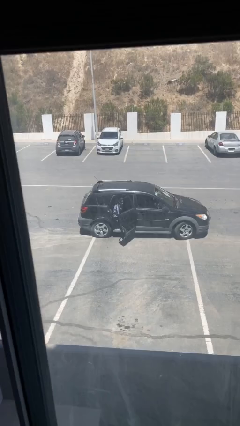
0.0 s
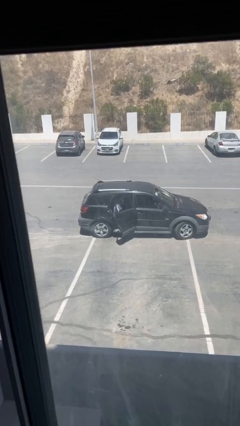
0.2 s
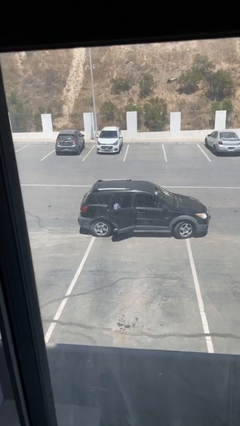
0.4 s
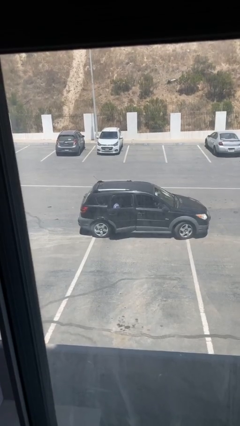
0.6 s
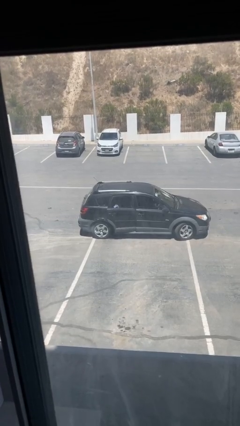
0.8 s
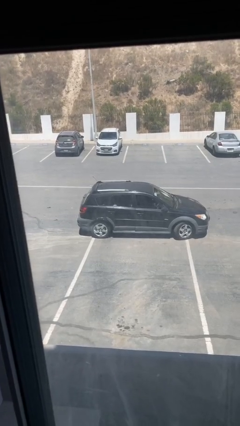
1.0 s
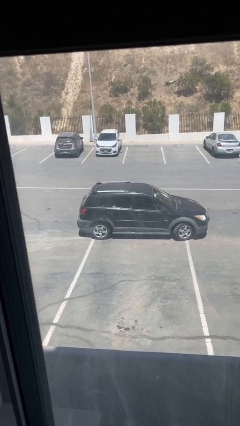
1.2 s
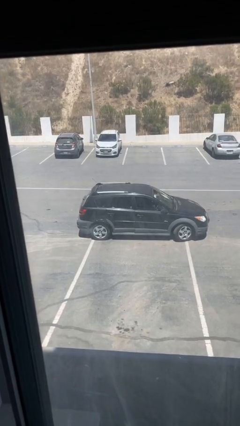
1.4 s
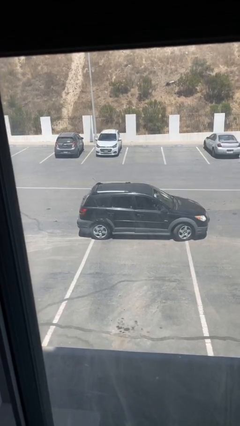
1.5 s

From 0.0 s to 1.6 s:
person closes car door

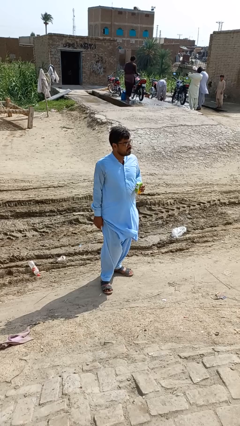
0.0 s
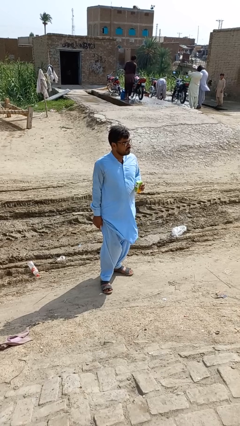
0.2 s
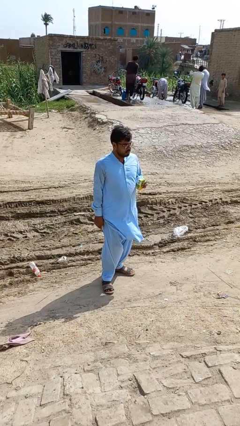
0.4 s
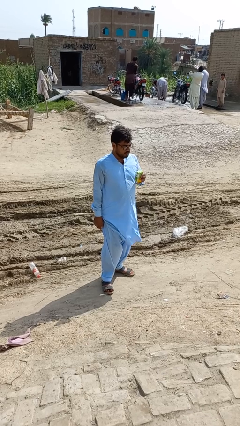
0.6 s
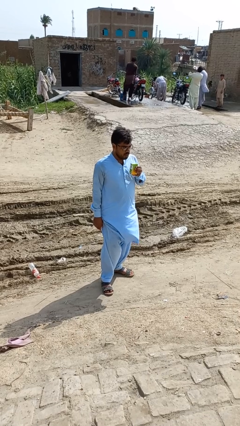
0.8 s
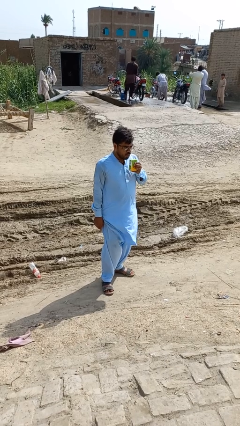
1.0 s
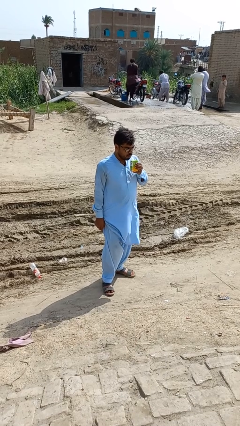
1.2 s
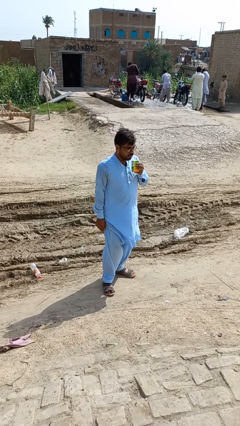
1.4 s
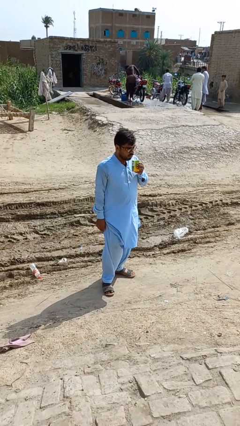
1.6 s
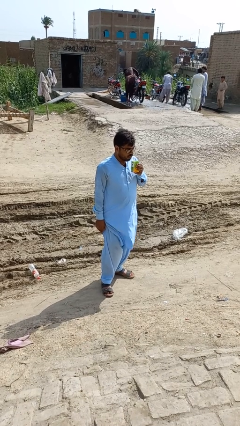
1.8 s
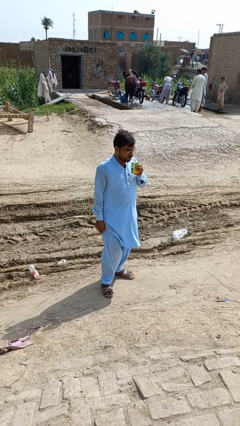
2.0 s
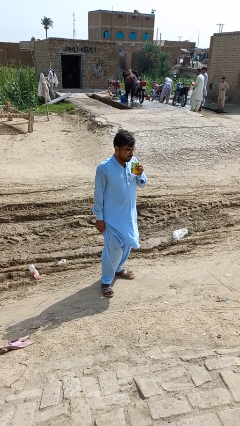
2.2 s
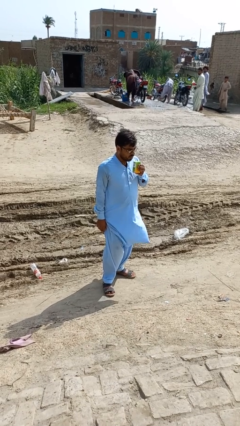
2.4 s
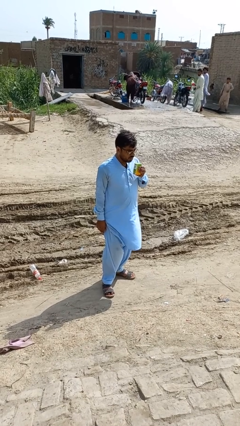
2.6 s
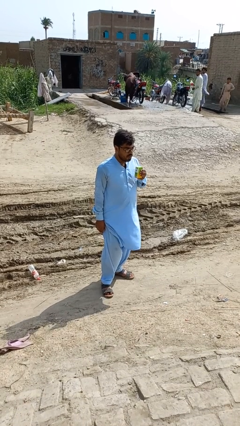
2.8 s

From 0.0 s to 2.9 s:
person drinks from straw

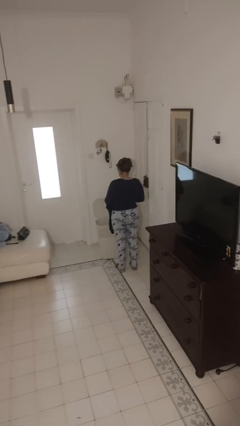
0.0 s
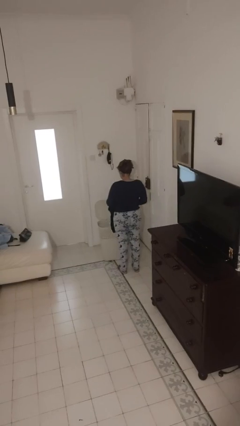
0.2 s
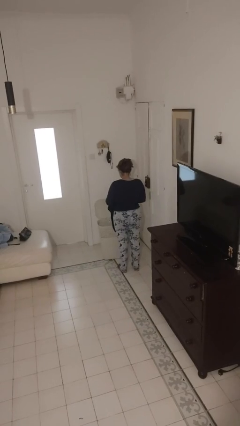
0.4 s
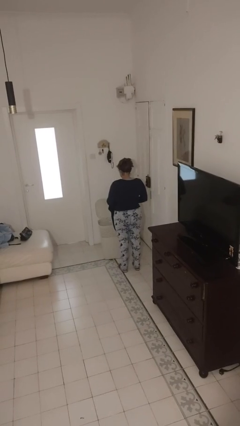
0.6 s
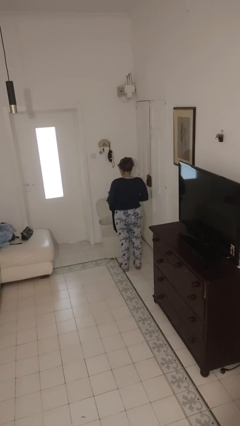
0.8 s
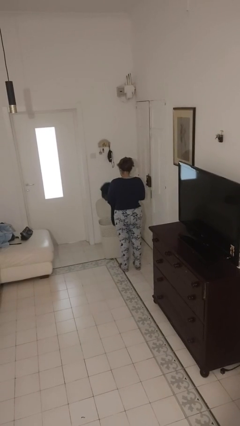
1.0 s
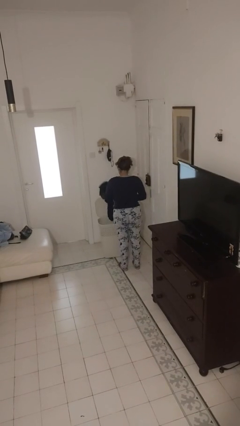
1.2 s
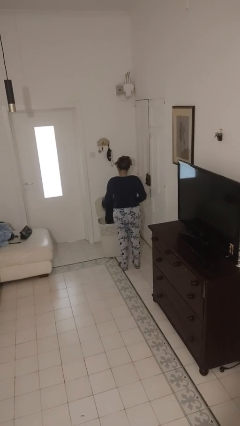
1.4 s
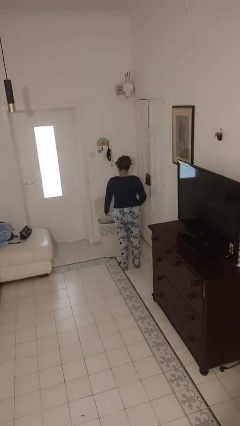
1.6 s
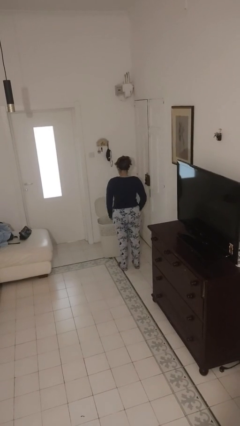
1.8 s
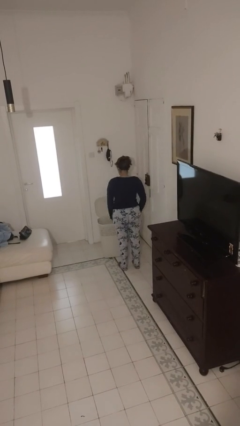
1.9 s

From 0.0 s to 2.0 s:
person puts object into basket

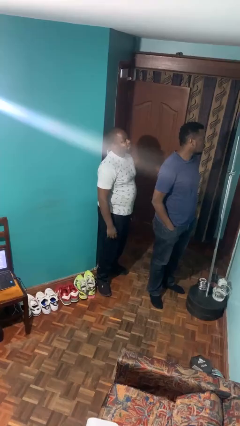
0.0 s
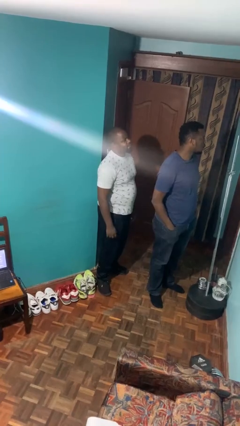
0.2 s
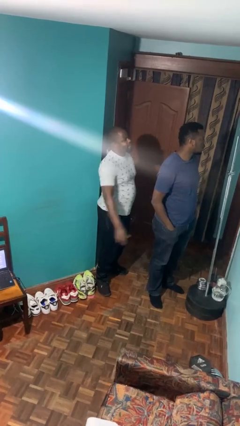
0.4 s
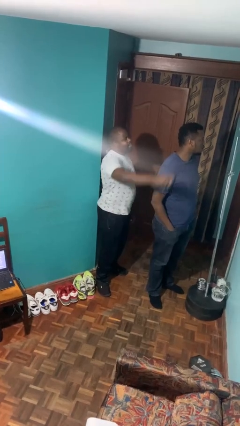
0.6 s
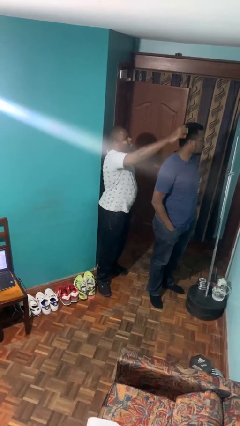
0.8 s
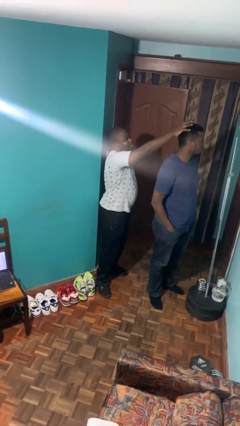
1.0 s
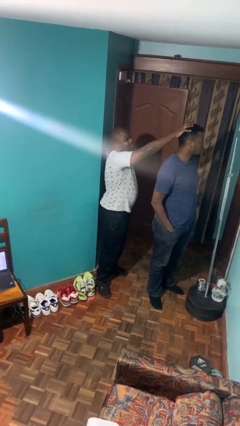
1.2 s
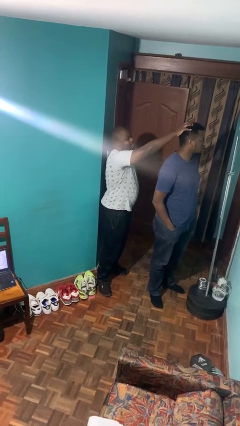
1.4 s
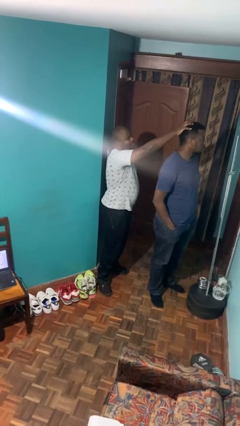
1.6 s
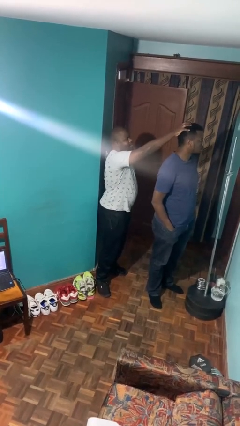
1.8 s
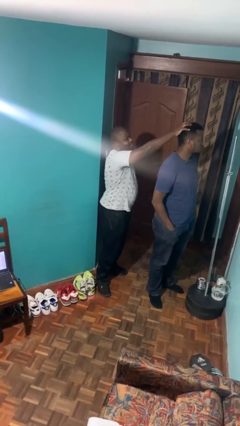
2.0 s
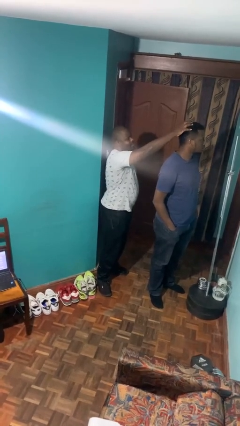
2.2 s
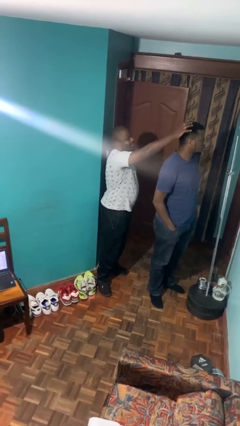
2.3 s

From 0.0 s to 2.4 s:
person grabs person by hair

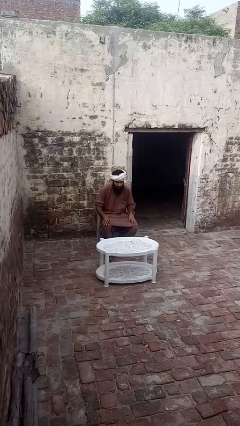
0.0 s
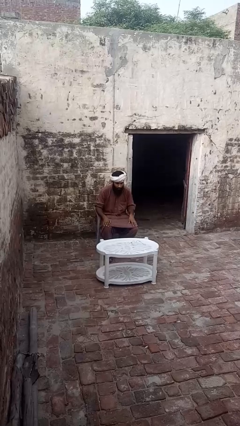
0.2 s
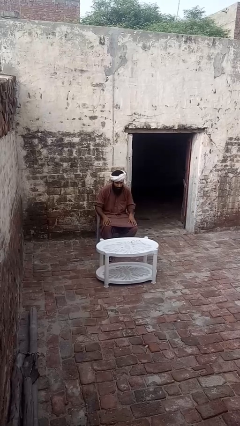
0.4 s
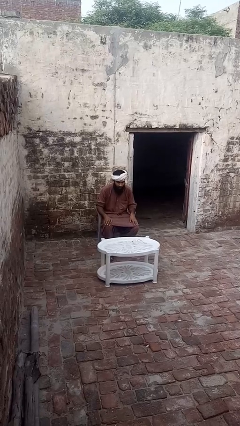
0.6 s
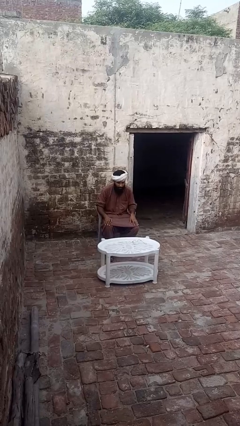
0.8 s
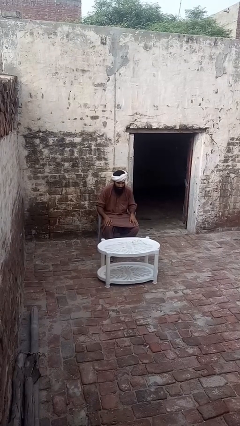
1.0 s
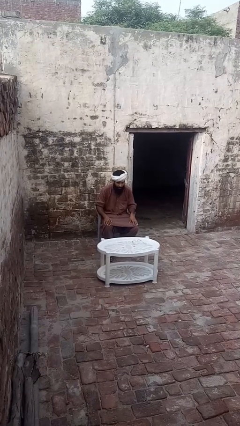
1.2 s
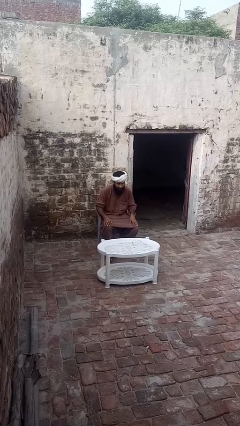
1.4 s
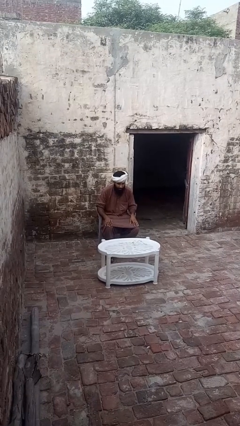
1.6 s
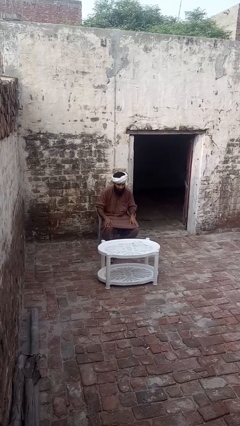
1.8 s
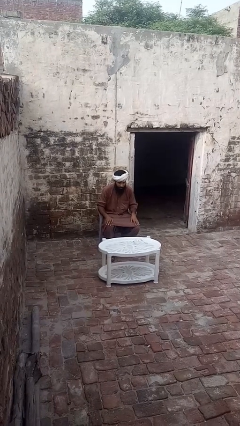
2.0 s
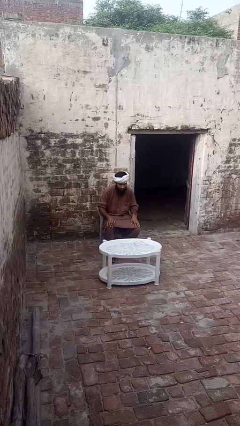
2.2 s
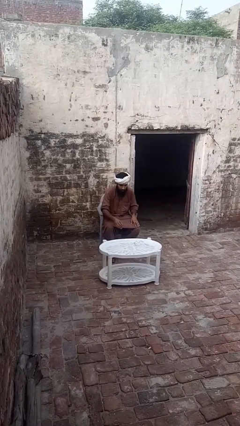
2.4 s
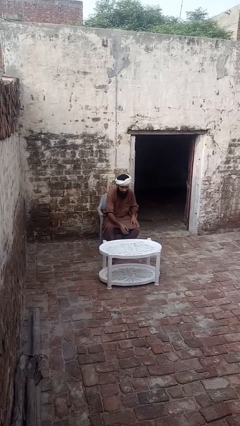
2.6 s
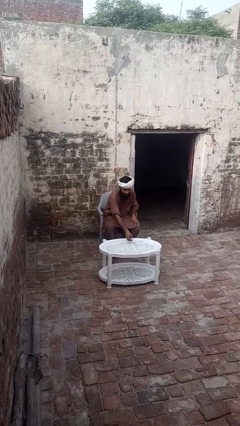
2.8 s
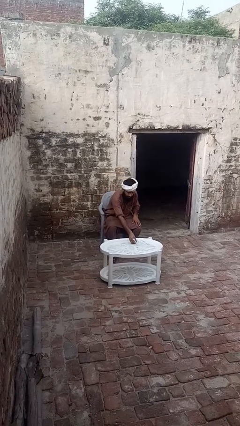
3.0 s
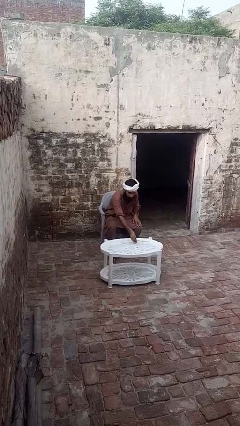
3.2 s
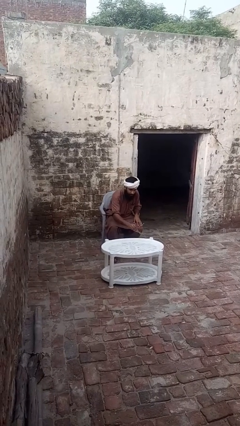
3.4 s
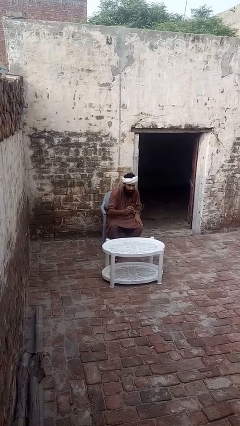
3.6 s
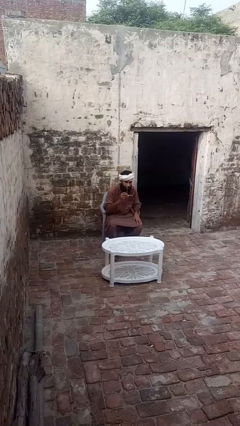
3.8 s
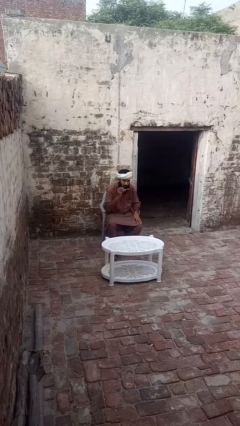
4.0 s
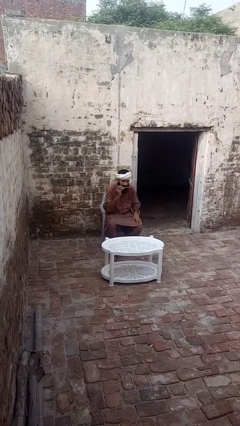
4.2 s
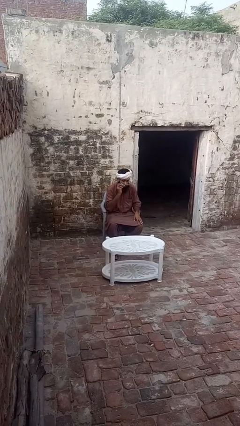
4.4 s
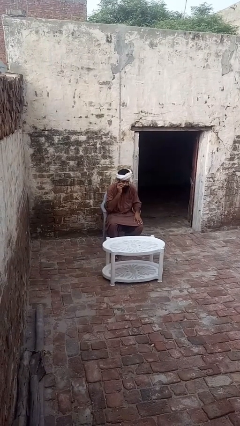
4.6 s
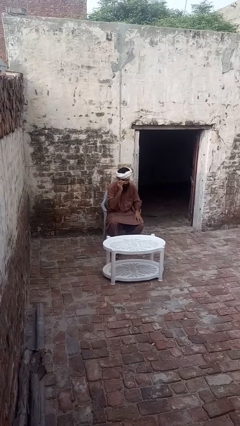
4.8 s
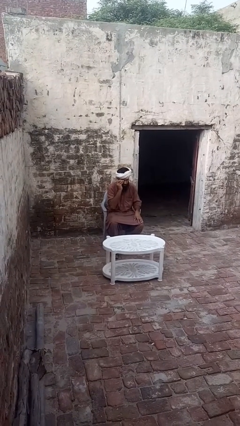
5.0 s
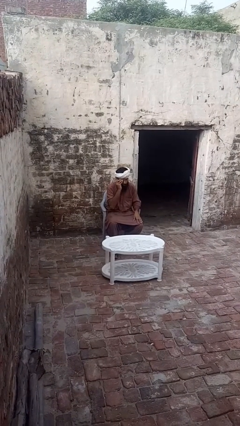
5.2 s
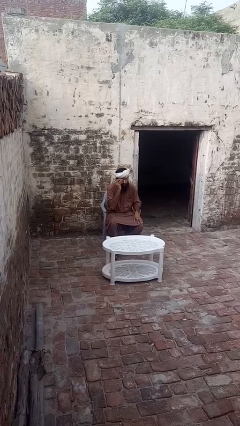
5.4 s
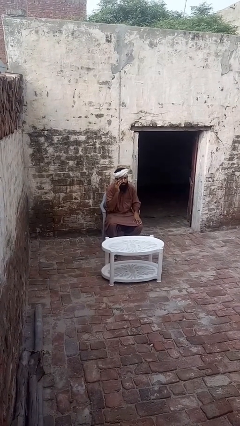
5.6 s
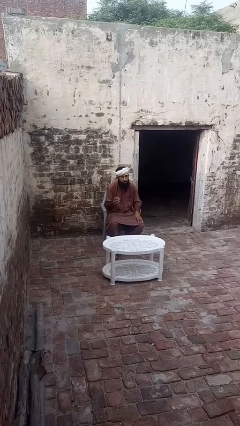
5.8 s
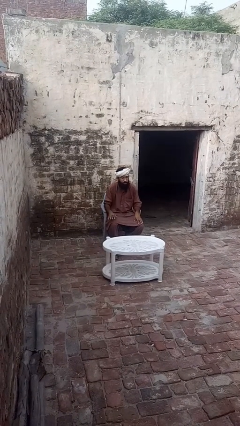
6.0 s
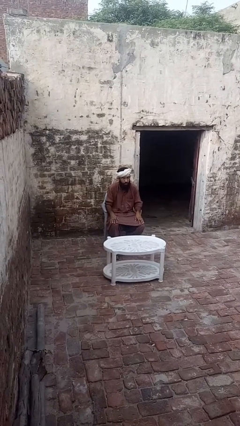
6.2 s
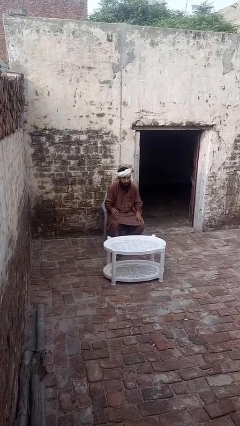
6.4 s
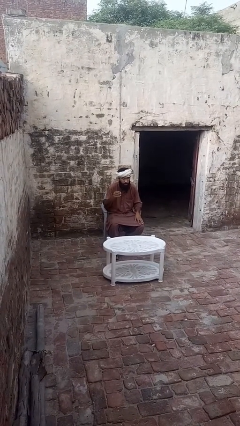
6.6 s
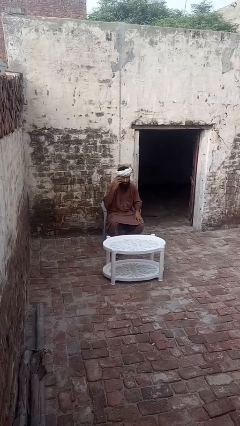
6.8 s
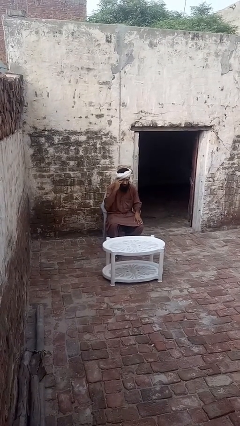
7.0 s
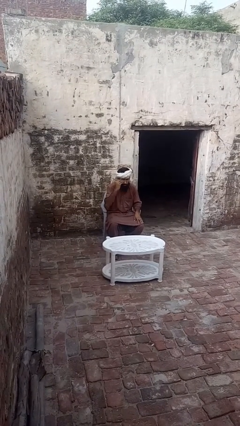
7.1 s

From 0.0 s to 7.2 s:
person puts on glasses

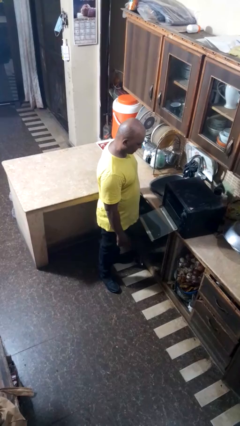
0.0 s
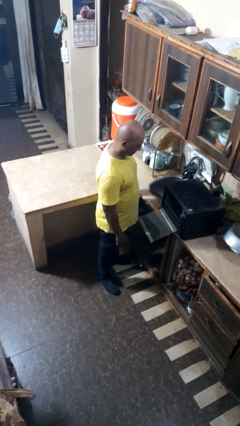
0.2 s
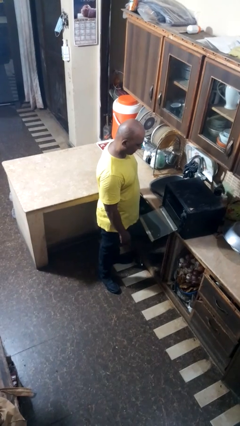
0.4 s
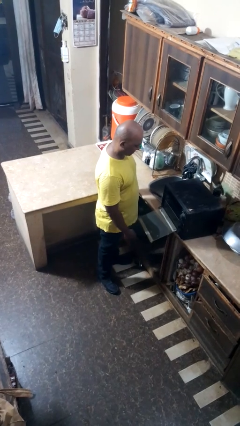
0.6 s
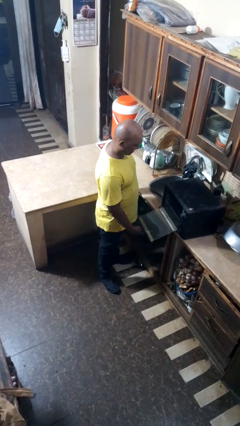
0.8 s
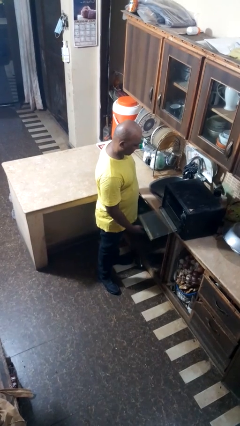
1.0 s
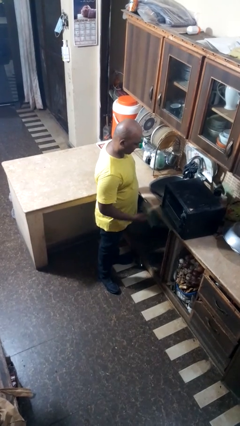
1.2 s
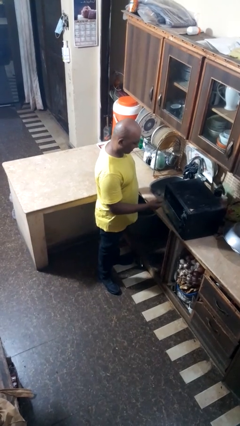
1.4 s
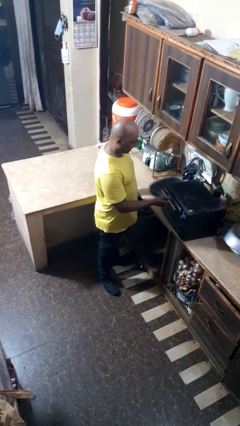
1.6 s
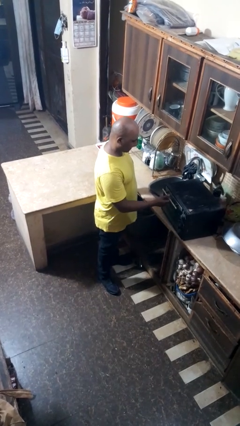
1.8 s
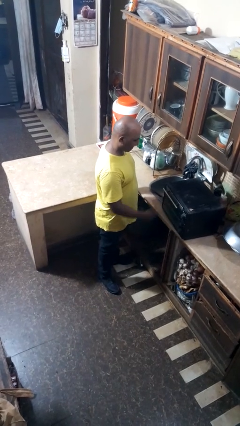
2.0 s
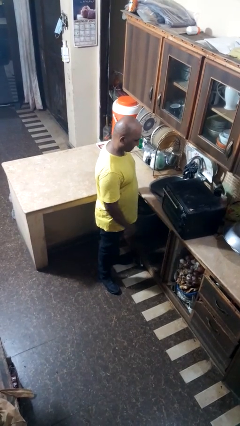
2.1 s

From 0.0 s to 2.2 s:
person closes oven door
